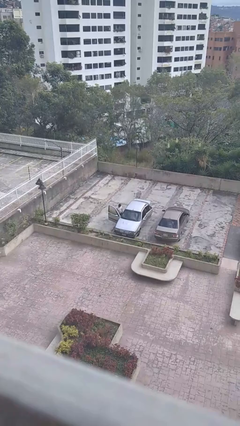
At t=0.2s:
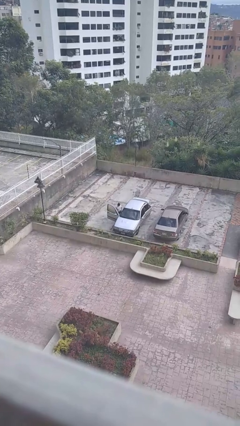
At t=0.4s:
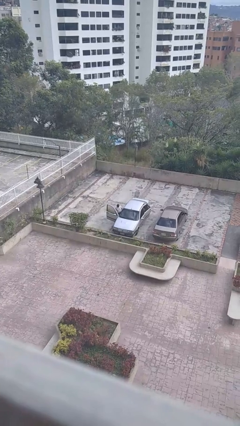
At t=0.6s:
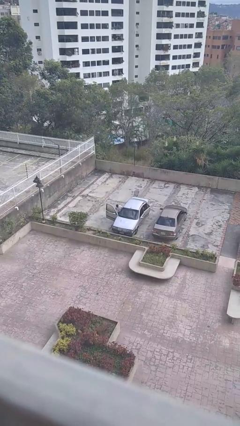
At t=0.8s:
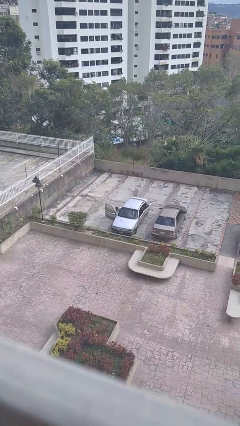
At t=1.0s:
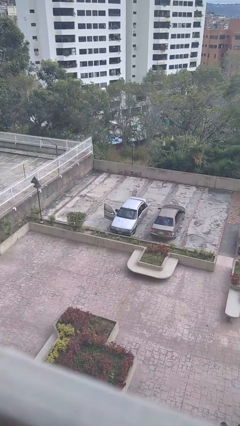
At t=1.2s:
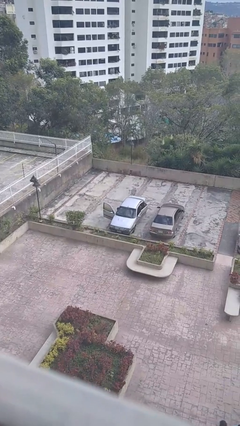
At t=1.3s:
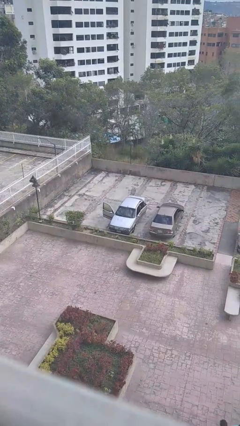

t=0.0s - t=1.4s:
person enters car

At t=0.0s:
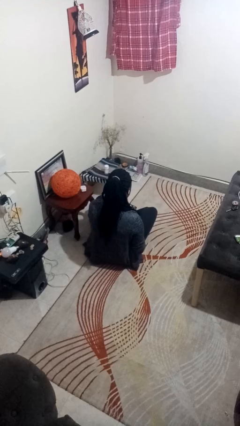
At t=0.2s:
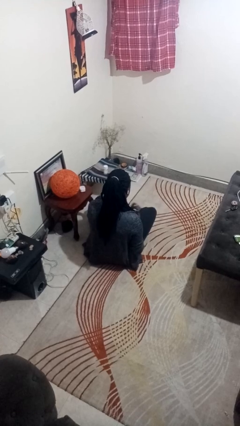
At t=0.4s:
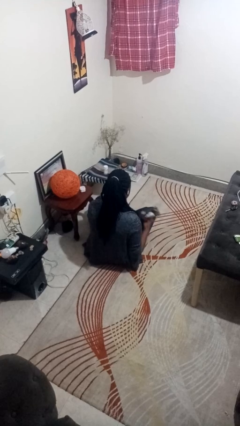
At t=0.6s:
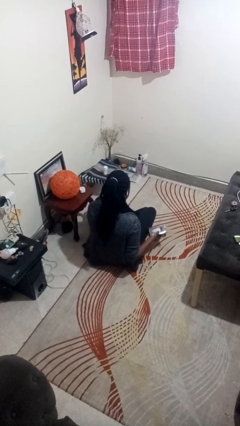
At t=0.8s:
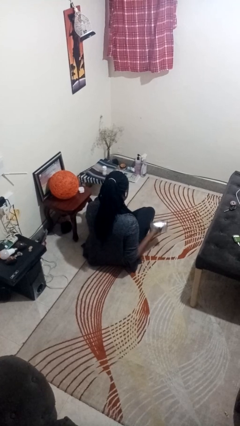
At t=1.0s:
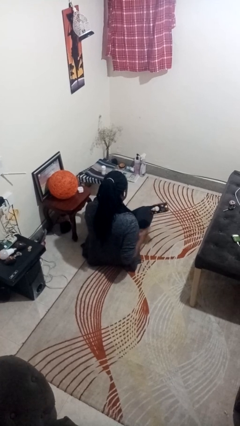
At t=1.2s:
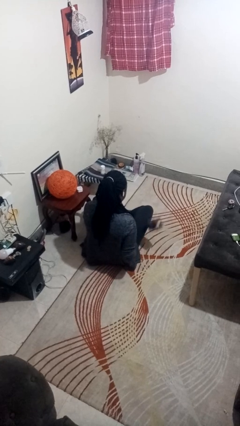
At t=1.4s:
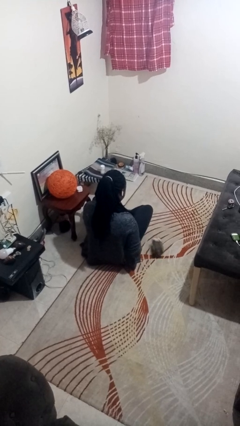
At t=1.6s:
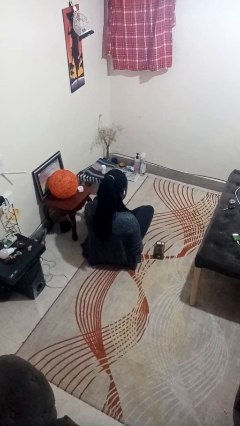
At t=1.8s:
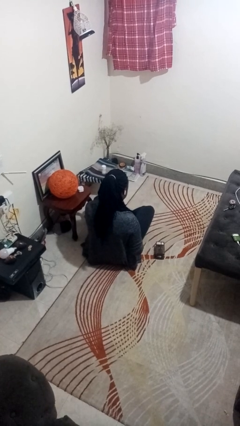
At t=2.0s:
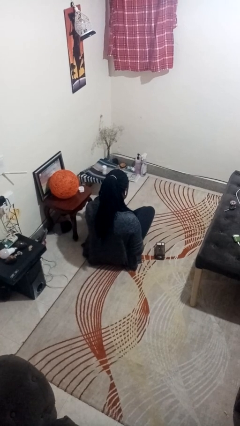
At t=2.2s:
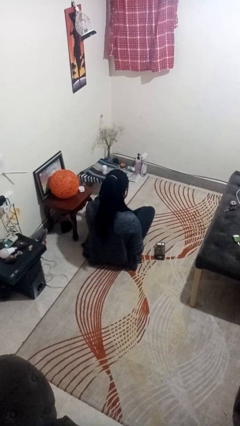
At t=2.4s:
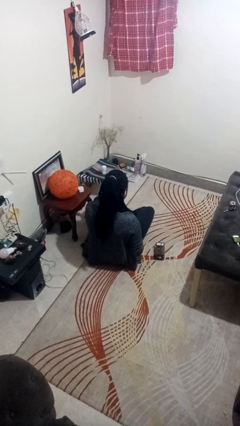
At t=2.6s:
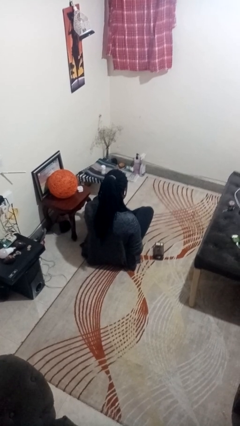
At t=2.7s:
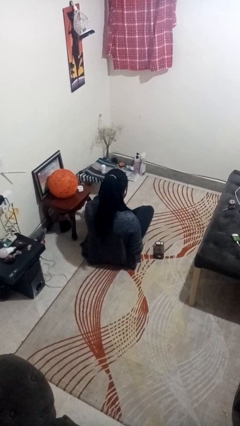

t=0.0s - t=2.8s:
person throws object into air

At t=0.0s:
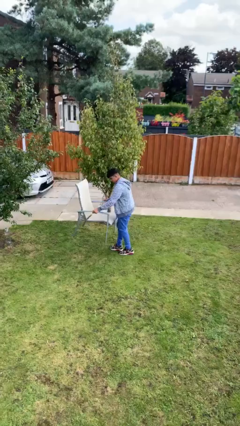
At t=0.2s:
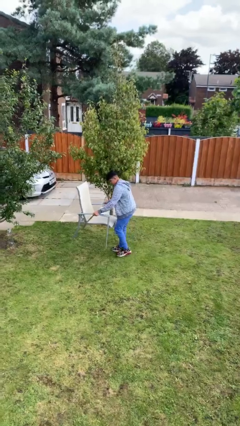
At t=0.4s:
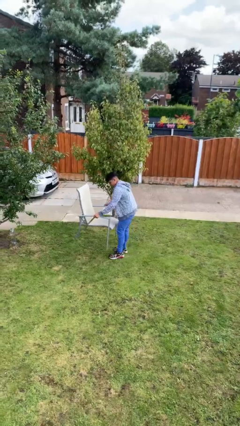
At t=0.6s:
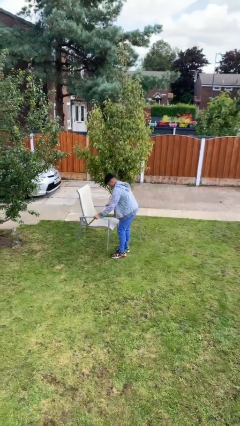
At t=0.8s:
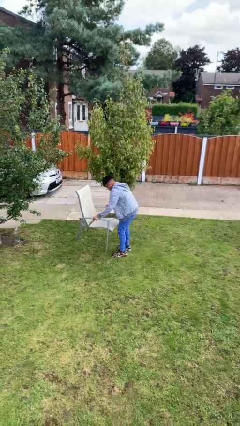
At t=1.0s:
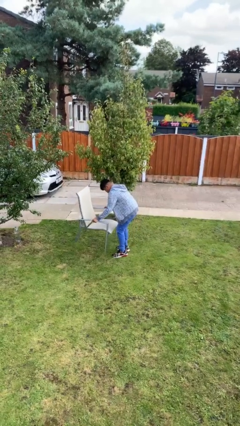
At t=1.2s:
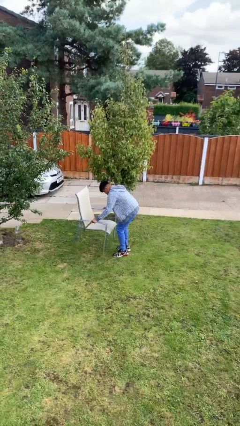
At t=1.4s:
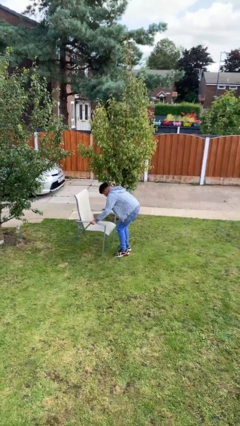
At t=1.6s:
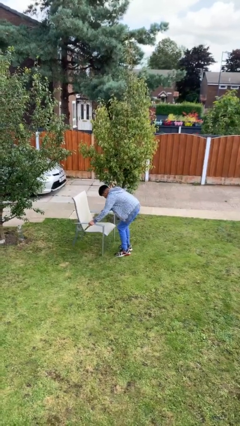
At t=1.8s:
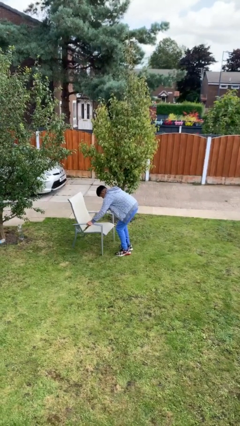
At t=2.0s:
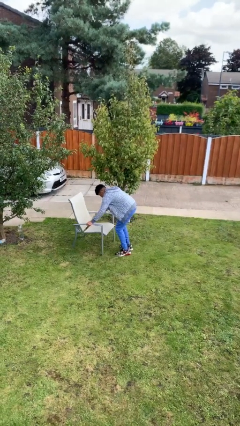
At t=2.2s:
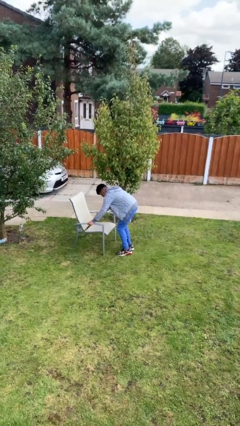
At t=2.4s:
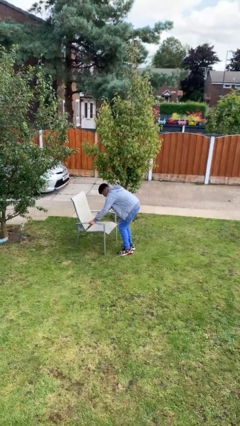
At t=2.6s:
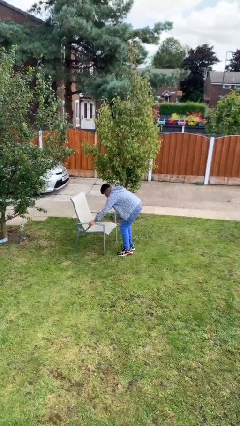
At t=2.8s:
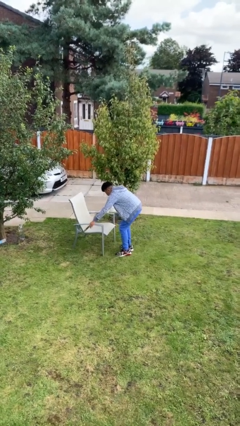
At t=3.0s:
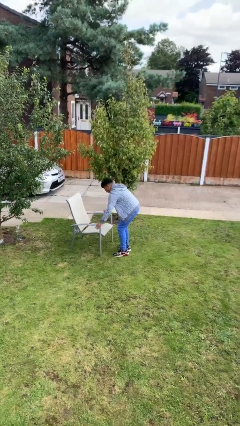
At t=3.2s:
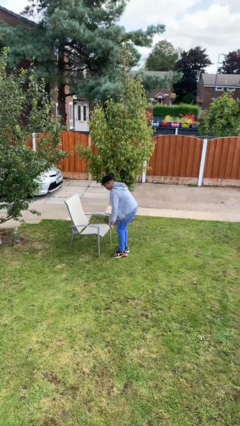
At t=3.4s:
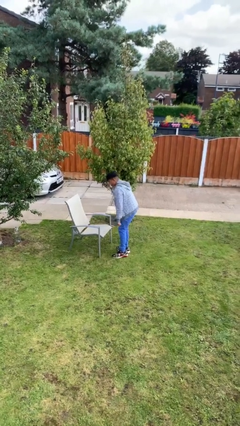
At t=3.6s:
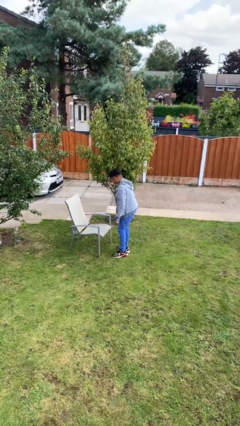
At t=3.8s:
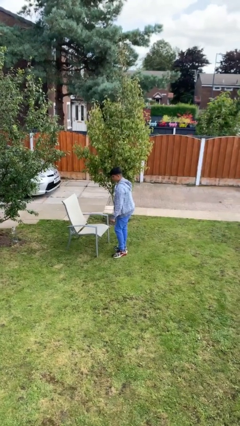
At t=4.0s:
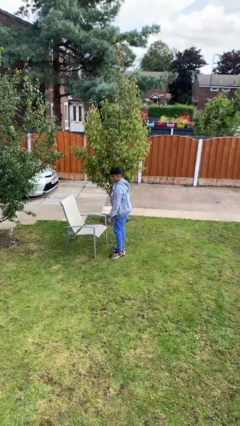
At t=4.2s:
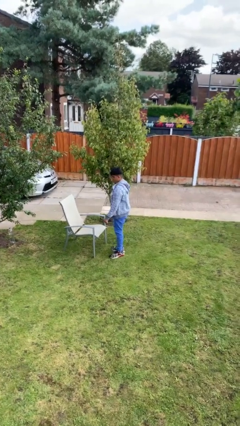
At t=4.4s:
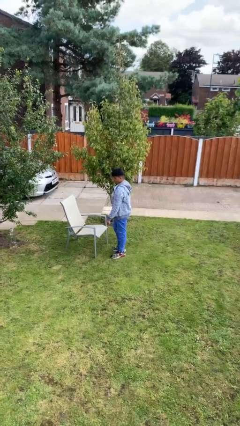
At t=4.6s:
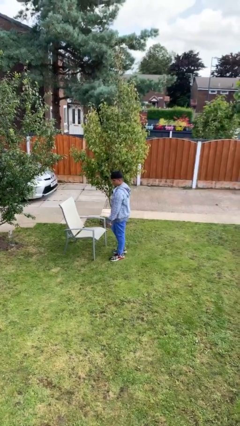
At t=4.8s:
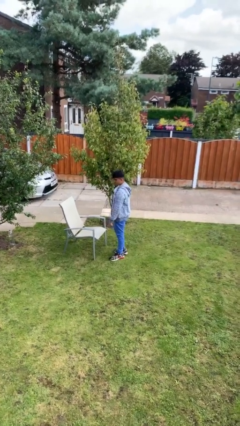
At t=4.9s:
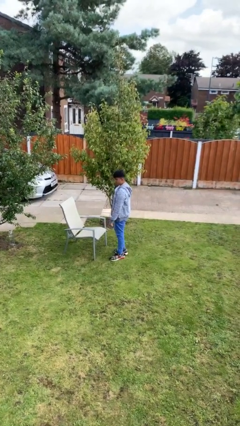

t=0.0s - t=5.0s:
person puts down object on floor

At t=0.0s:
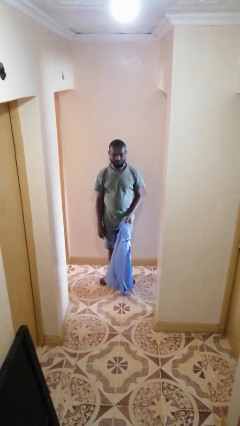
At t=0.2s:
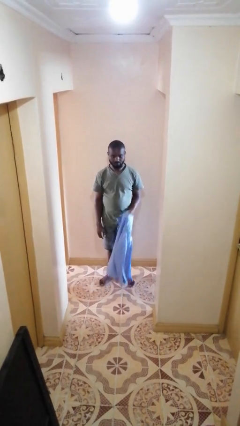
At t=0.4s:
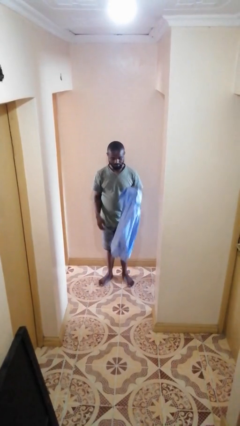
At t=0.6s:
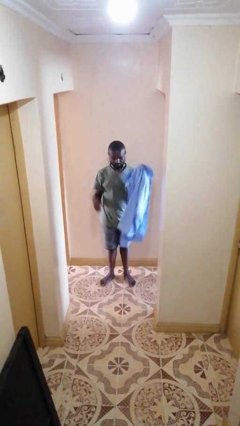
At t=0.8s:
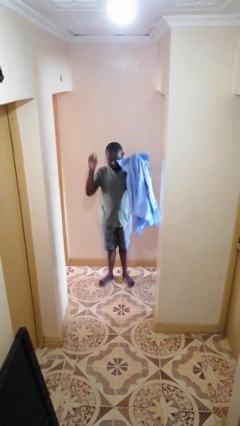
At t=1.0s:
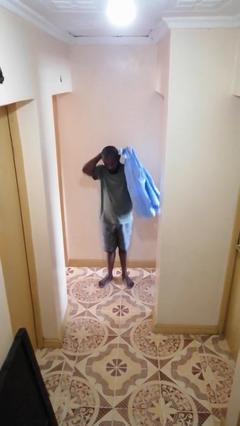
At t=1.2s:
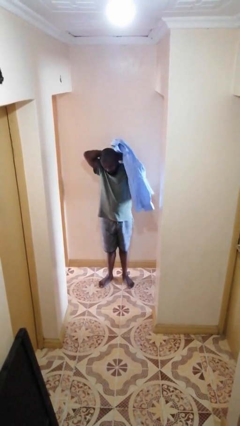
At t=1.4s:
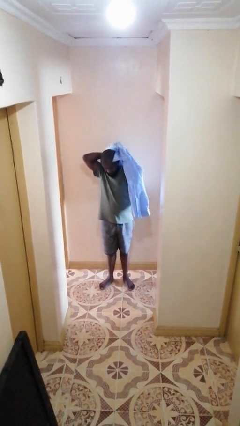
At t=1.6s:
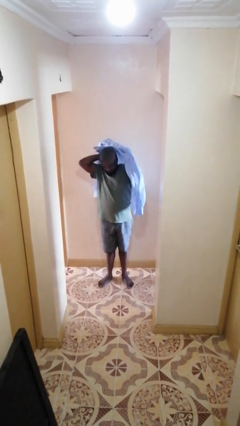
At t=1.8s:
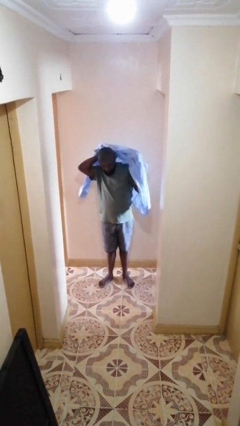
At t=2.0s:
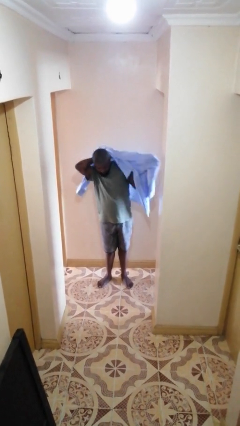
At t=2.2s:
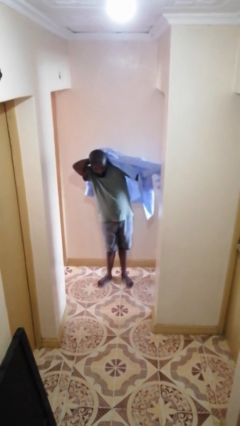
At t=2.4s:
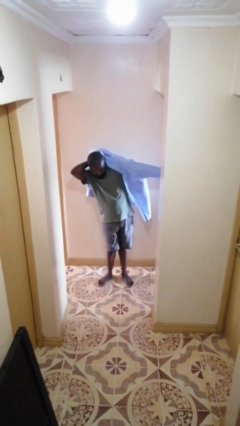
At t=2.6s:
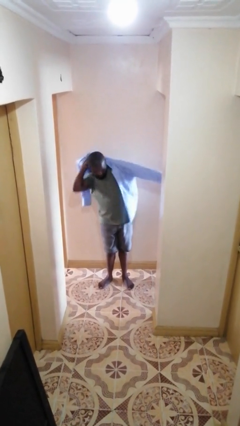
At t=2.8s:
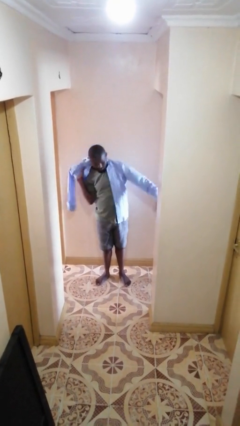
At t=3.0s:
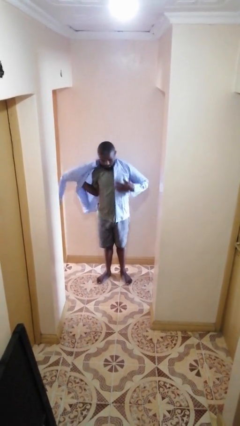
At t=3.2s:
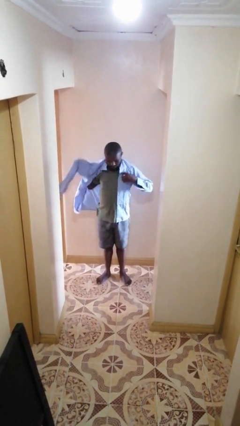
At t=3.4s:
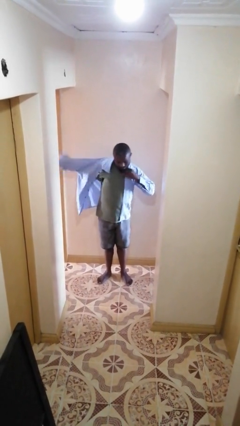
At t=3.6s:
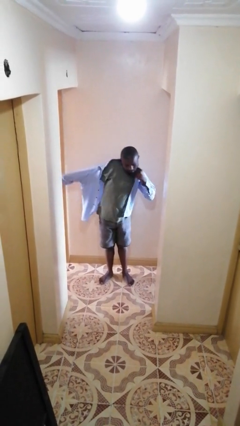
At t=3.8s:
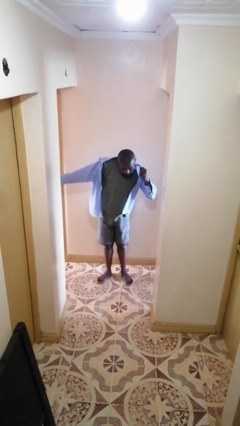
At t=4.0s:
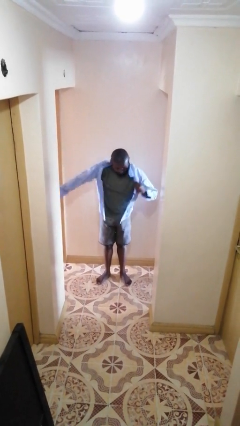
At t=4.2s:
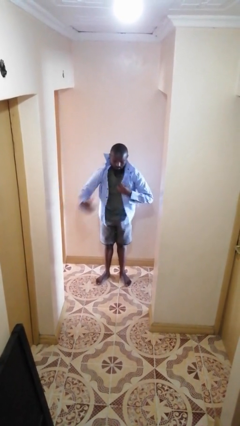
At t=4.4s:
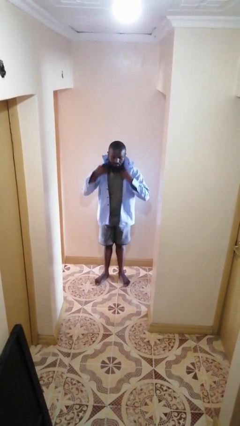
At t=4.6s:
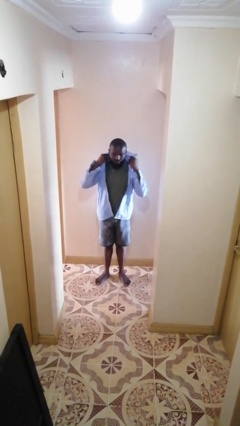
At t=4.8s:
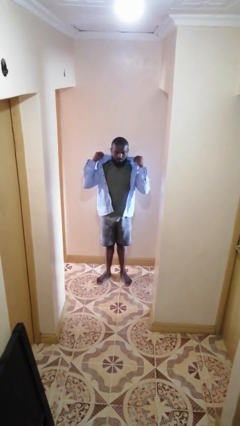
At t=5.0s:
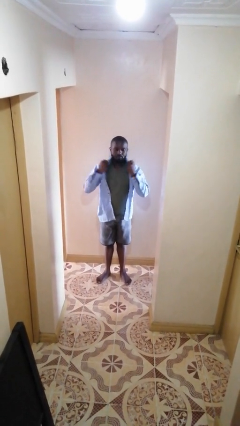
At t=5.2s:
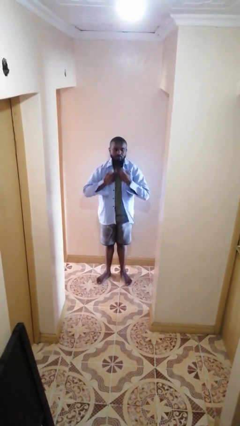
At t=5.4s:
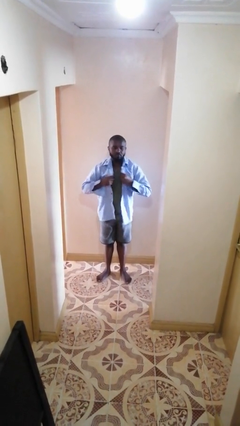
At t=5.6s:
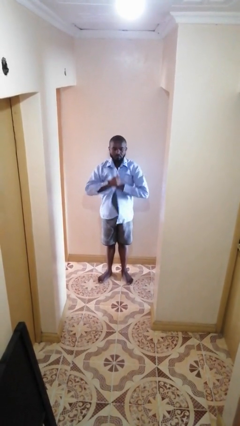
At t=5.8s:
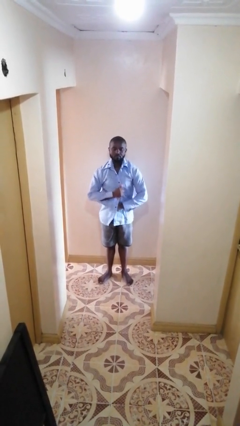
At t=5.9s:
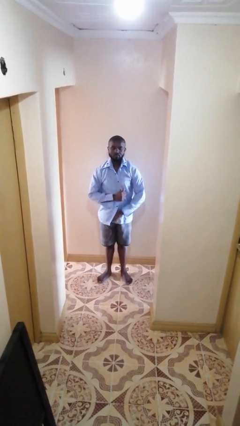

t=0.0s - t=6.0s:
person puts on shirt

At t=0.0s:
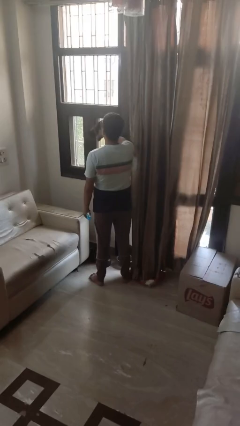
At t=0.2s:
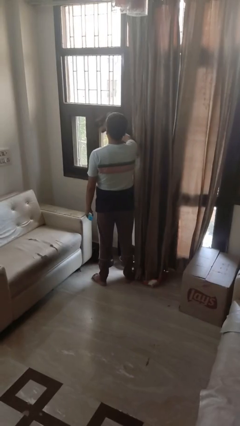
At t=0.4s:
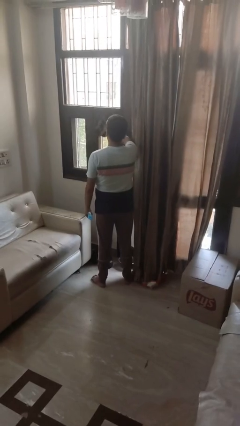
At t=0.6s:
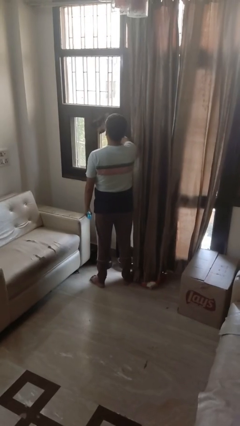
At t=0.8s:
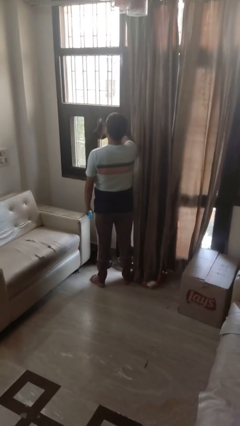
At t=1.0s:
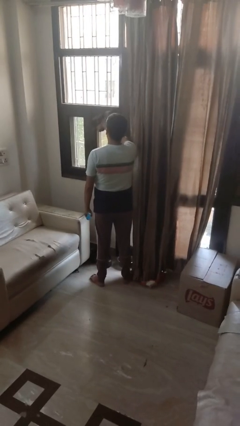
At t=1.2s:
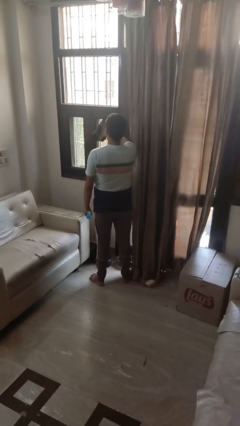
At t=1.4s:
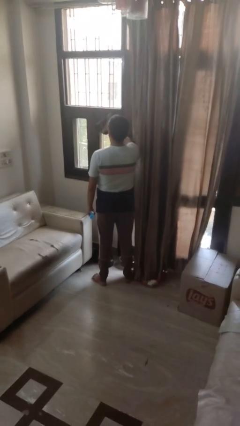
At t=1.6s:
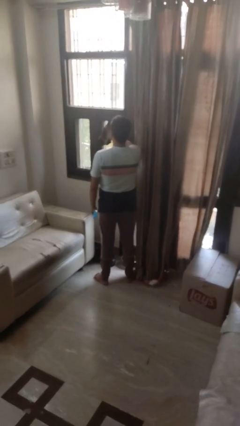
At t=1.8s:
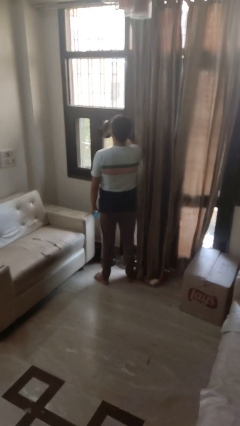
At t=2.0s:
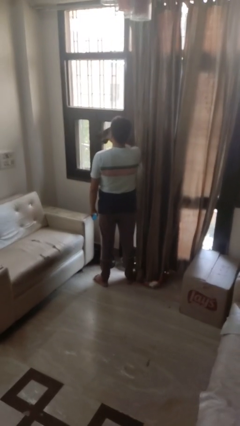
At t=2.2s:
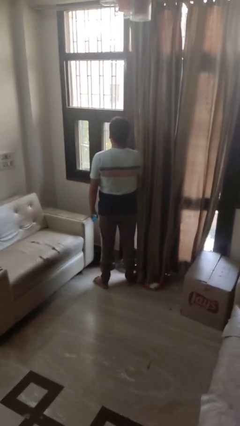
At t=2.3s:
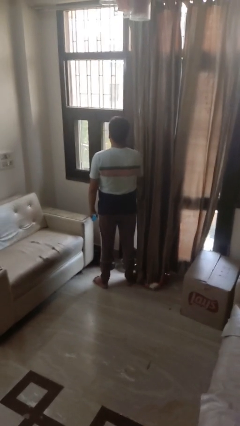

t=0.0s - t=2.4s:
person washes window
